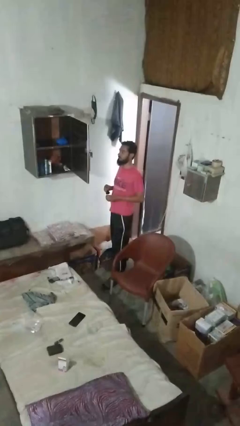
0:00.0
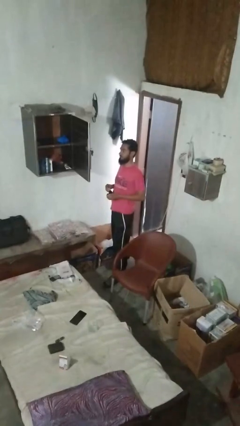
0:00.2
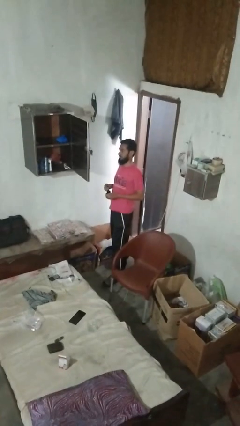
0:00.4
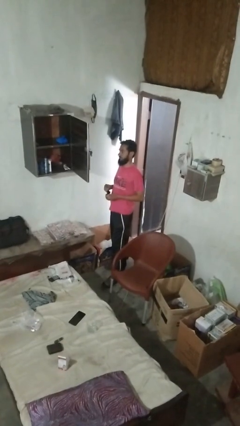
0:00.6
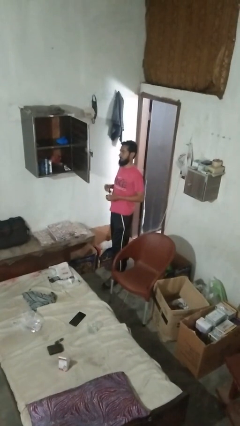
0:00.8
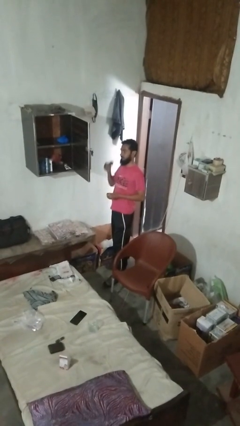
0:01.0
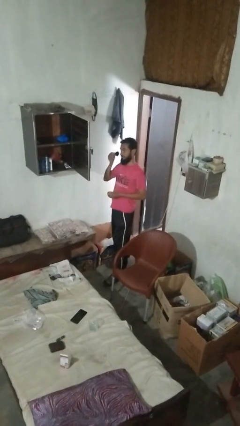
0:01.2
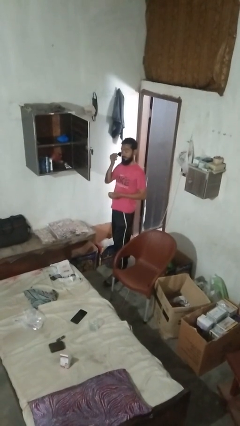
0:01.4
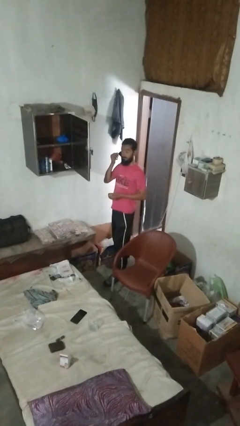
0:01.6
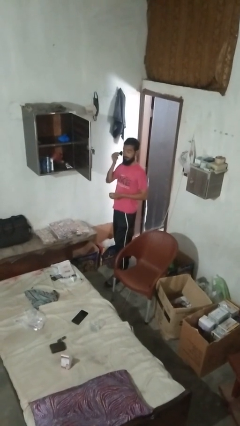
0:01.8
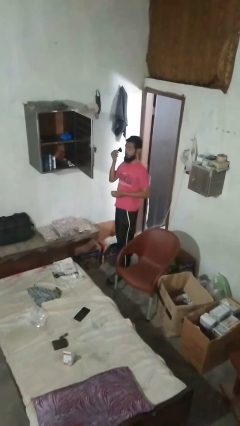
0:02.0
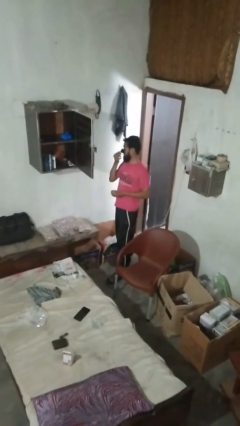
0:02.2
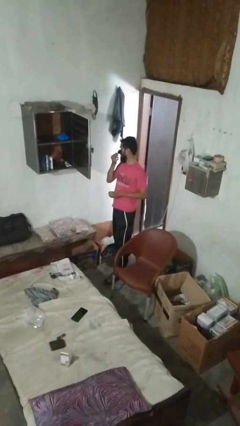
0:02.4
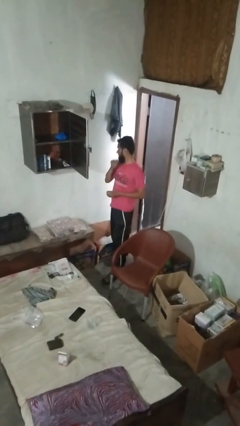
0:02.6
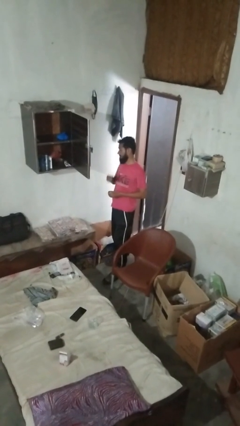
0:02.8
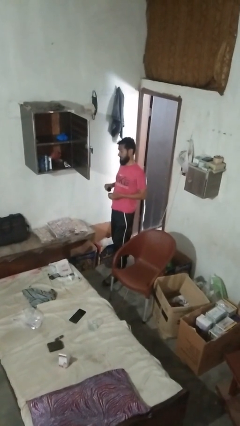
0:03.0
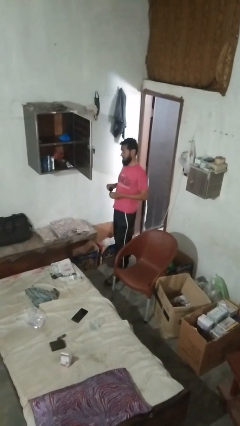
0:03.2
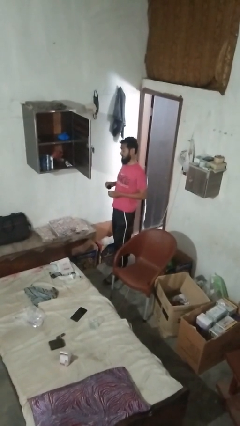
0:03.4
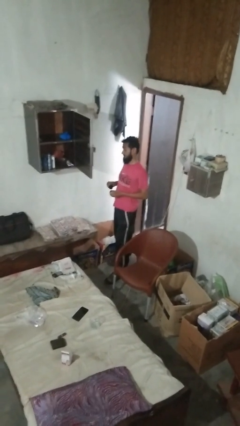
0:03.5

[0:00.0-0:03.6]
person applies foundation makeup

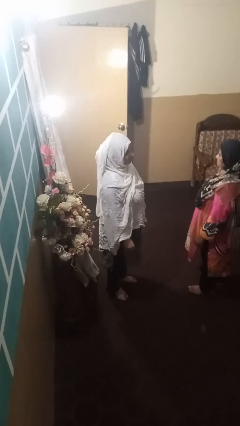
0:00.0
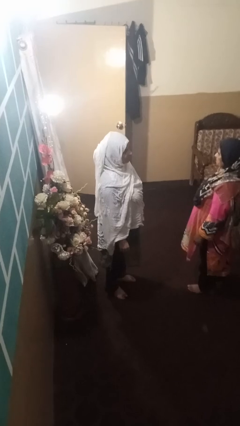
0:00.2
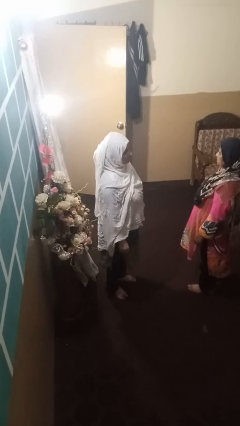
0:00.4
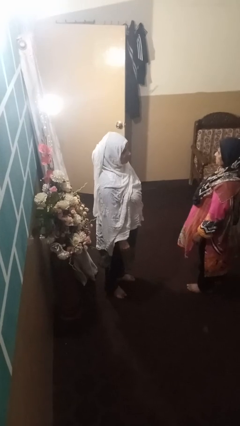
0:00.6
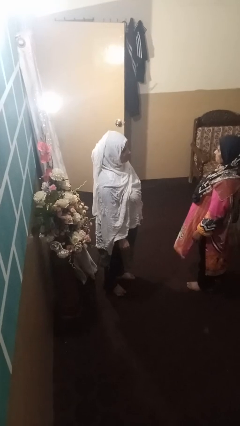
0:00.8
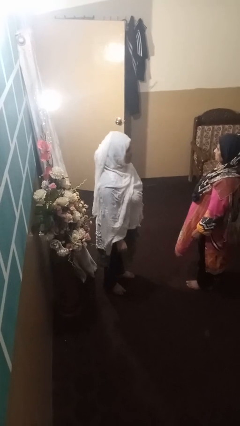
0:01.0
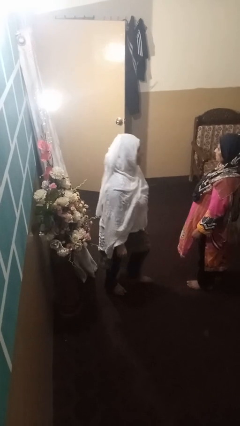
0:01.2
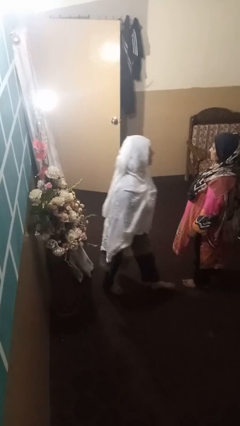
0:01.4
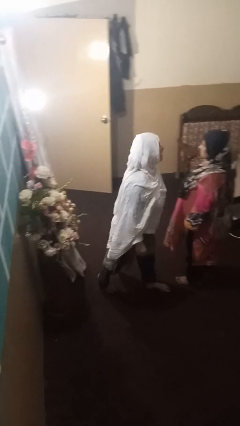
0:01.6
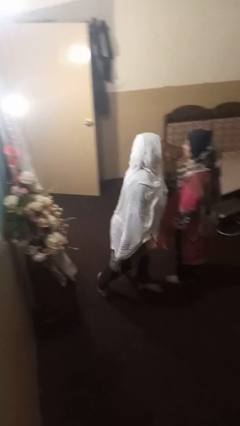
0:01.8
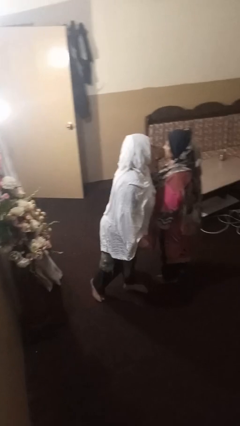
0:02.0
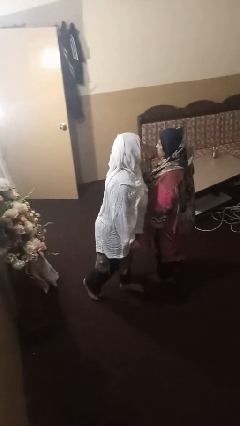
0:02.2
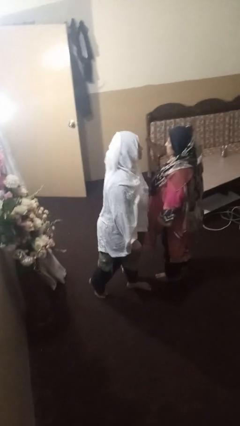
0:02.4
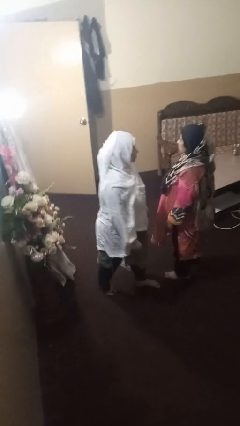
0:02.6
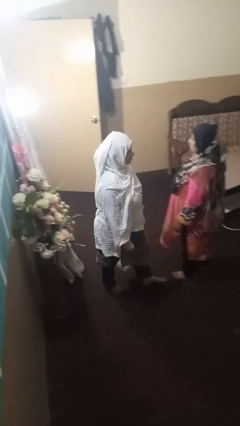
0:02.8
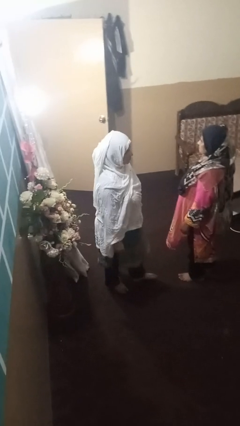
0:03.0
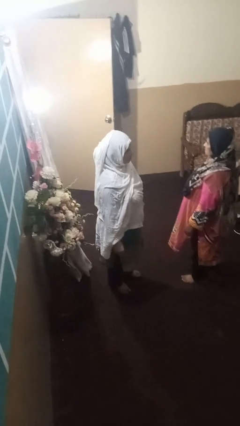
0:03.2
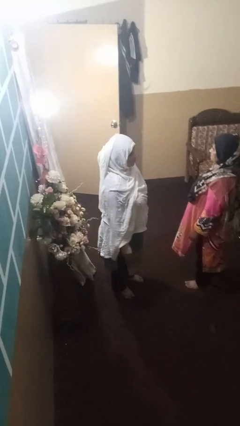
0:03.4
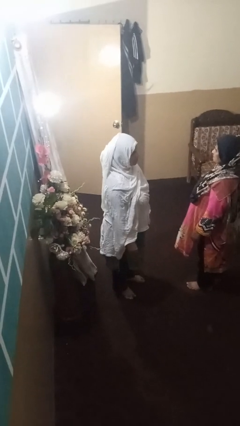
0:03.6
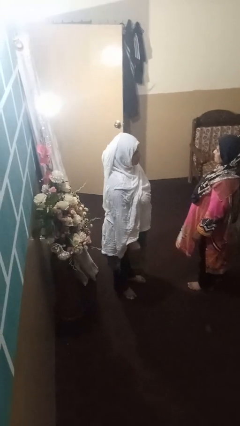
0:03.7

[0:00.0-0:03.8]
person laughs with person

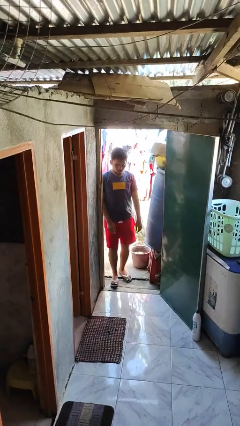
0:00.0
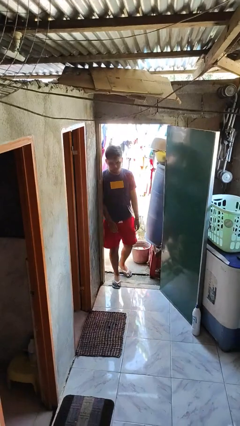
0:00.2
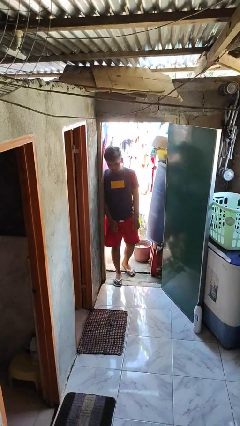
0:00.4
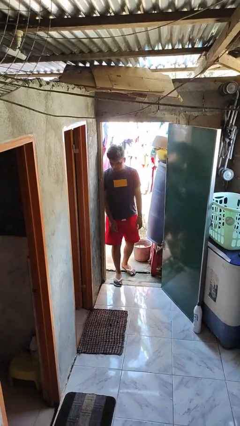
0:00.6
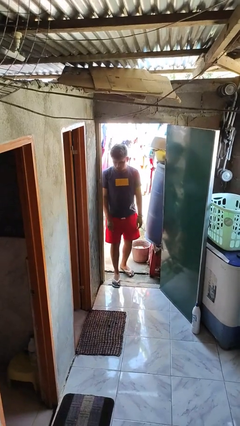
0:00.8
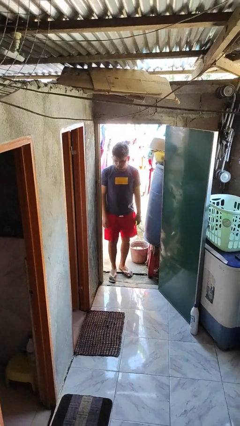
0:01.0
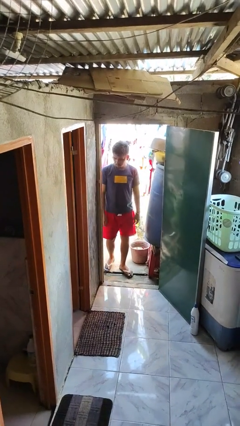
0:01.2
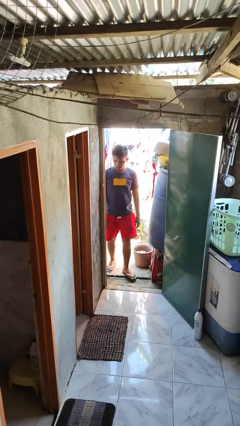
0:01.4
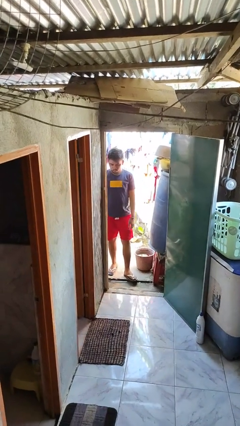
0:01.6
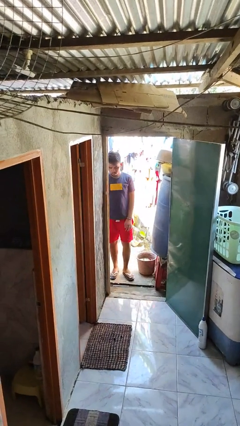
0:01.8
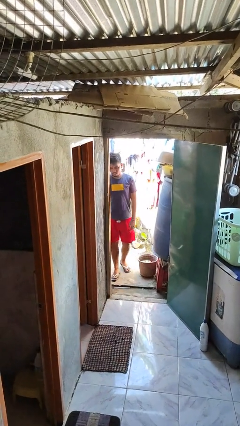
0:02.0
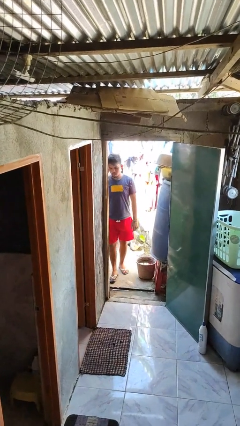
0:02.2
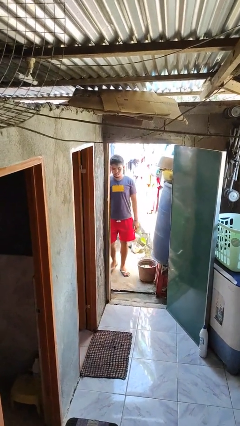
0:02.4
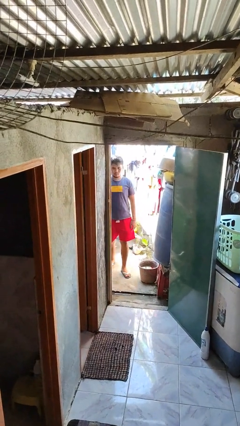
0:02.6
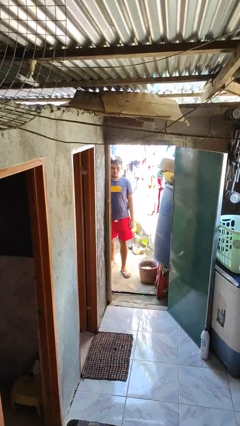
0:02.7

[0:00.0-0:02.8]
person bumps into wall

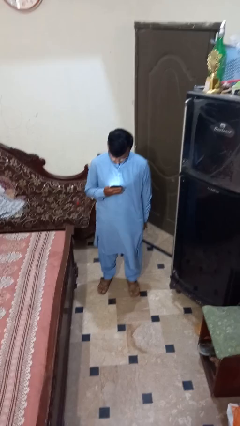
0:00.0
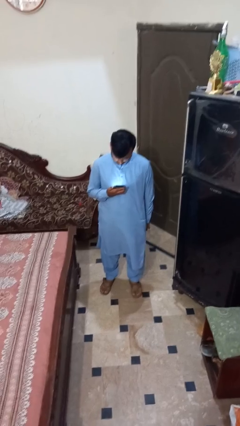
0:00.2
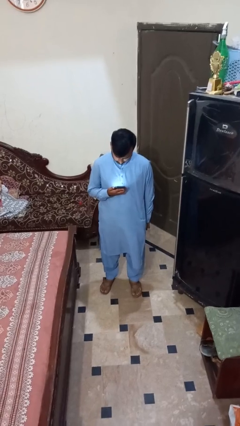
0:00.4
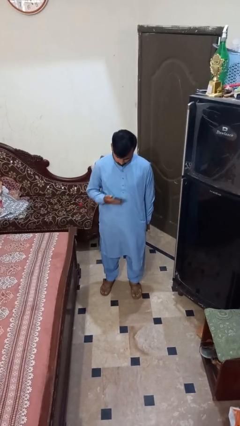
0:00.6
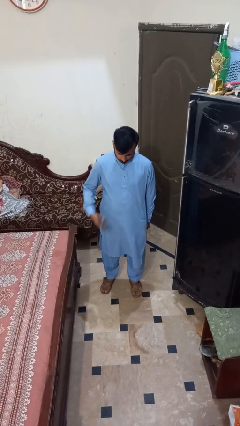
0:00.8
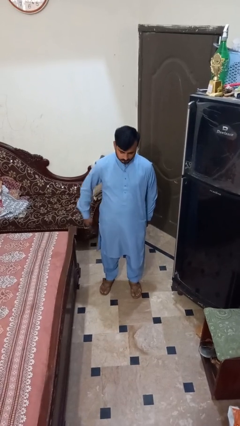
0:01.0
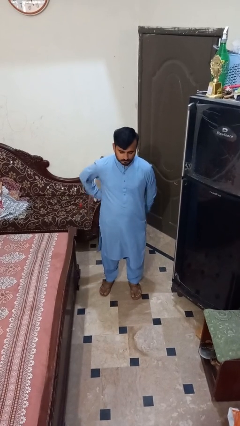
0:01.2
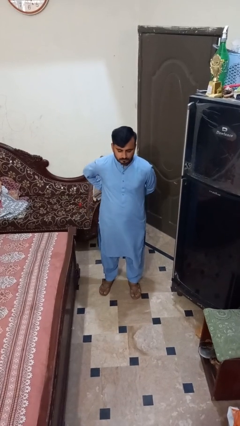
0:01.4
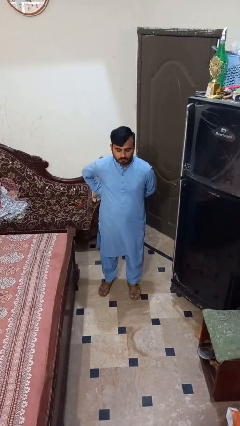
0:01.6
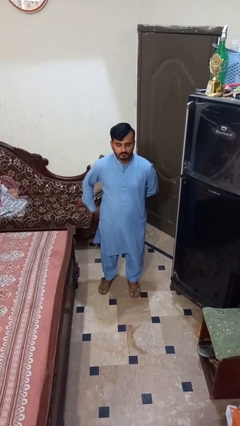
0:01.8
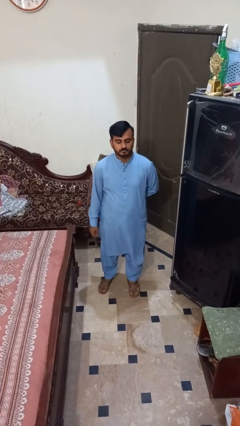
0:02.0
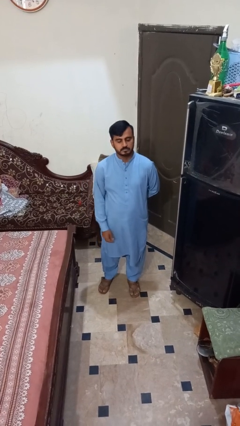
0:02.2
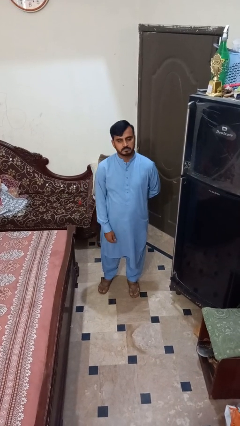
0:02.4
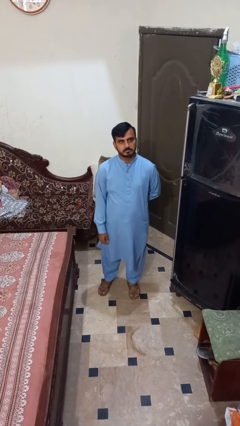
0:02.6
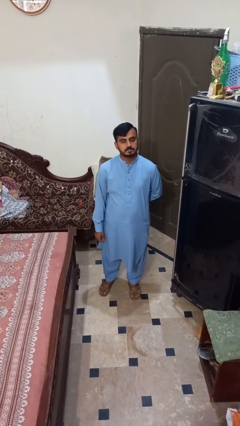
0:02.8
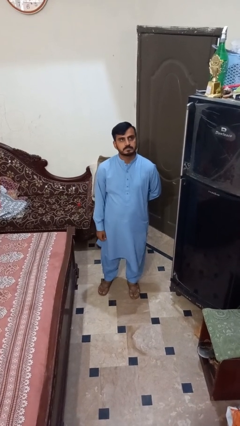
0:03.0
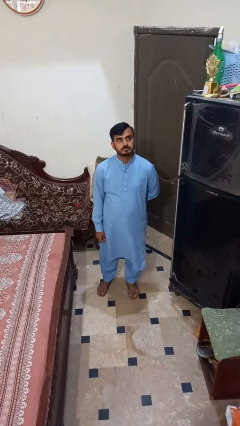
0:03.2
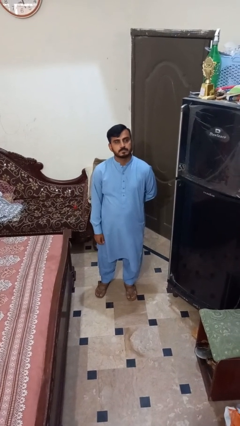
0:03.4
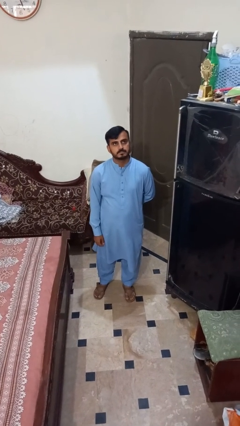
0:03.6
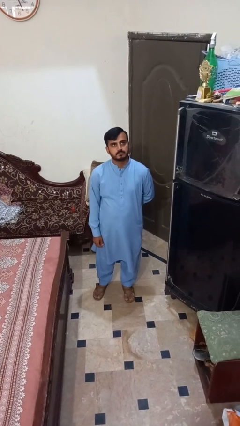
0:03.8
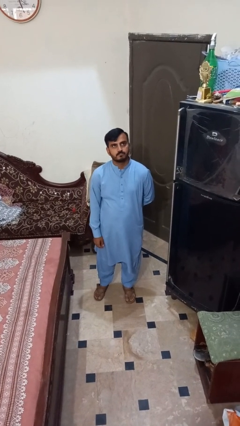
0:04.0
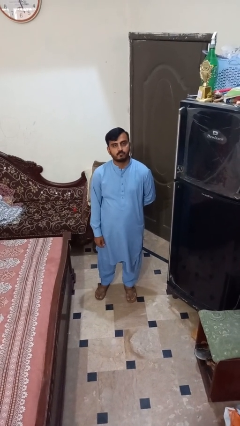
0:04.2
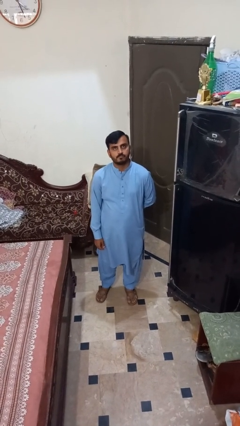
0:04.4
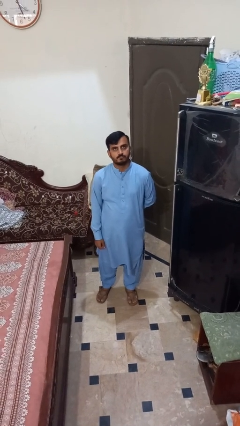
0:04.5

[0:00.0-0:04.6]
person puts phone into pocket

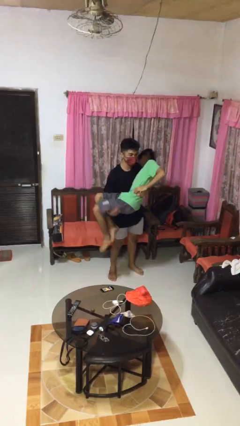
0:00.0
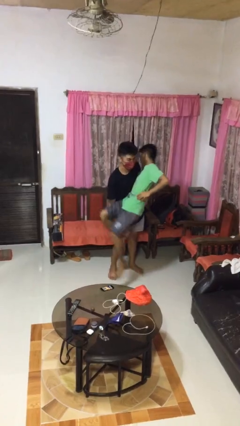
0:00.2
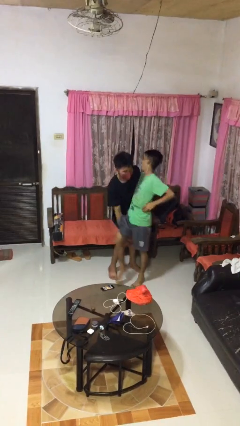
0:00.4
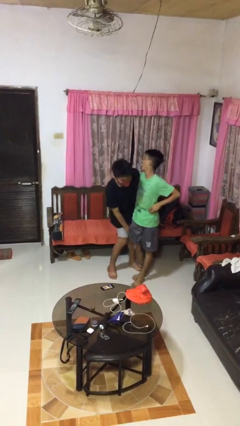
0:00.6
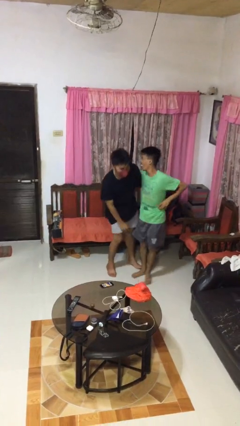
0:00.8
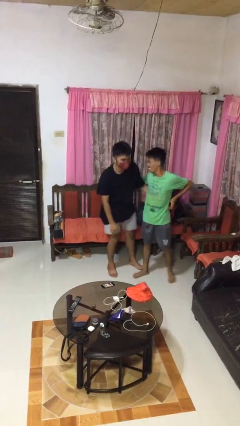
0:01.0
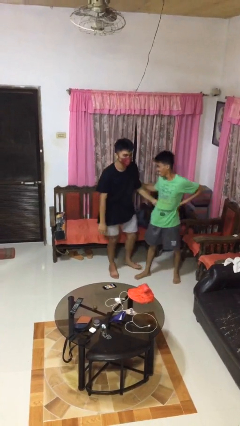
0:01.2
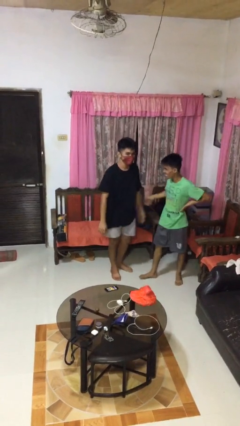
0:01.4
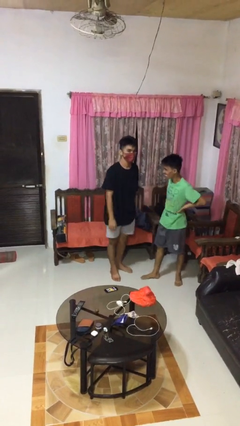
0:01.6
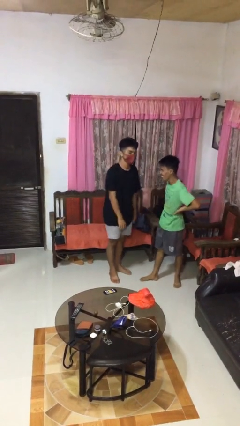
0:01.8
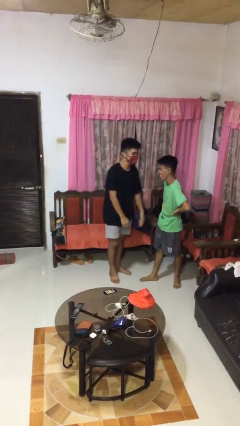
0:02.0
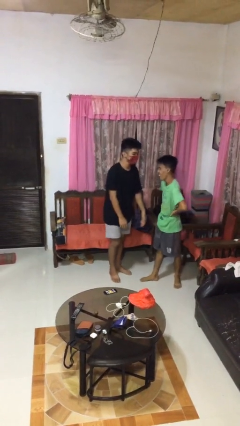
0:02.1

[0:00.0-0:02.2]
person puts down person

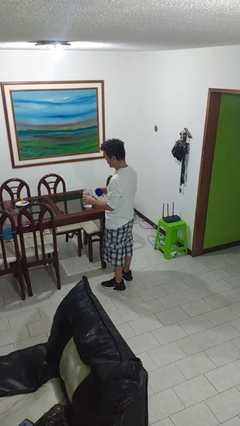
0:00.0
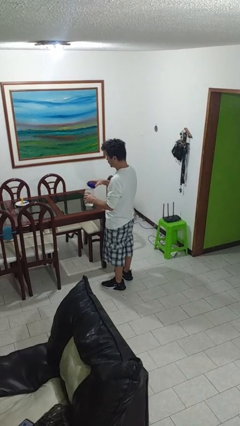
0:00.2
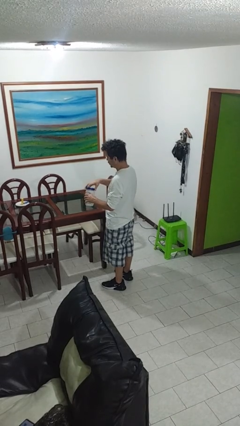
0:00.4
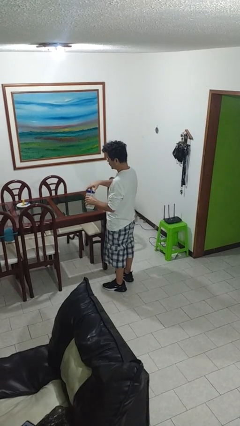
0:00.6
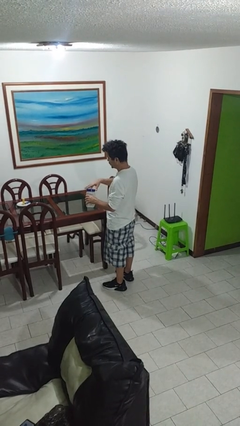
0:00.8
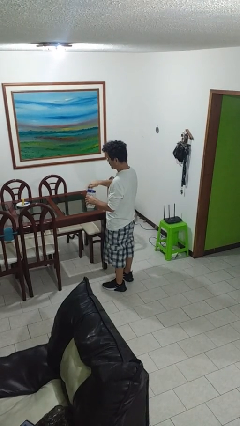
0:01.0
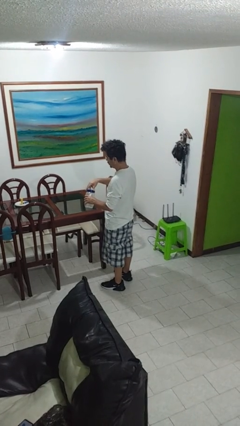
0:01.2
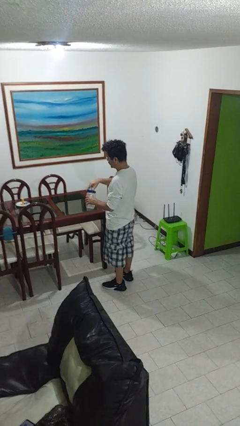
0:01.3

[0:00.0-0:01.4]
person closes jar
